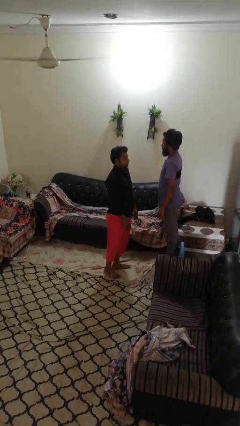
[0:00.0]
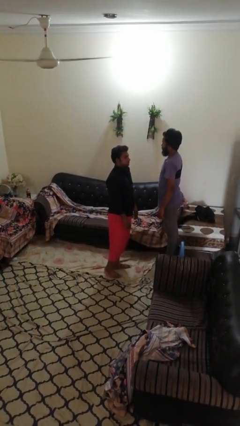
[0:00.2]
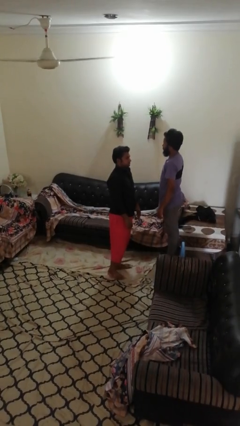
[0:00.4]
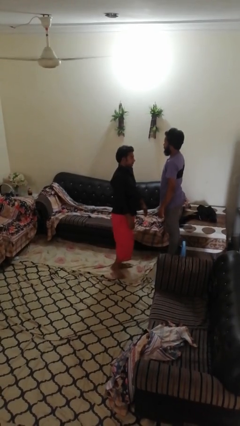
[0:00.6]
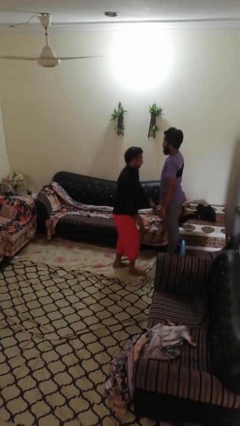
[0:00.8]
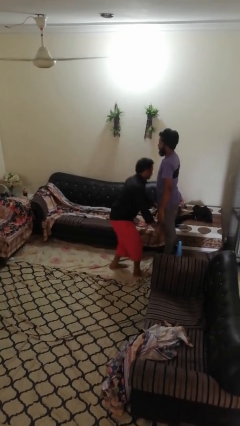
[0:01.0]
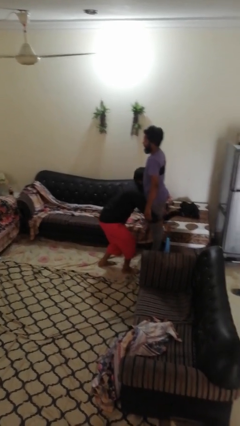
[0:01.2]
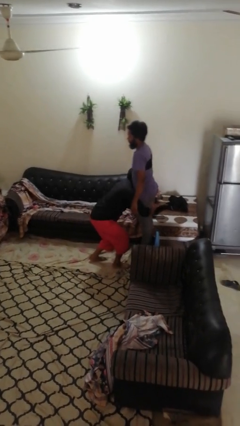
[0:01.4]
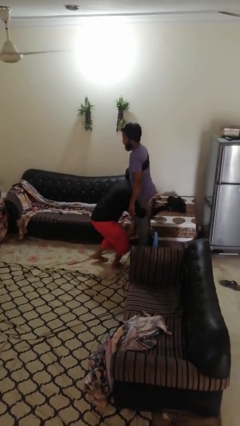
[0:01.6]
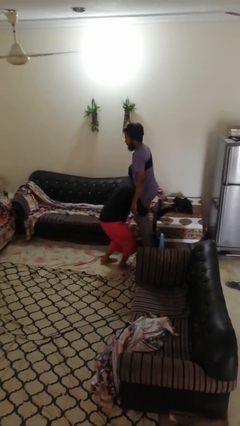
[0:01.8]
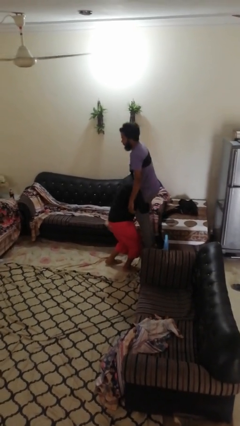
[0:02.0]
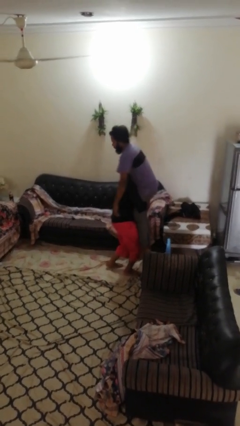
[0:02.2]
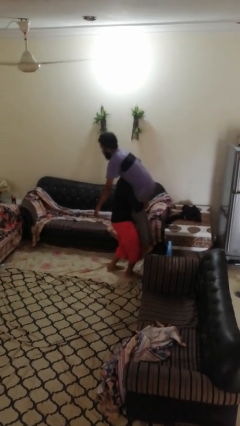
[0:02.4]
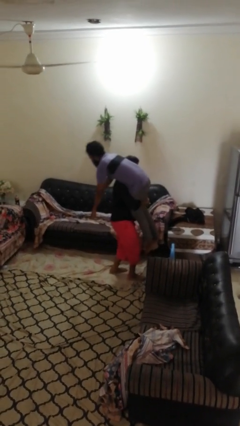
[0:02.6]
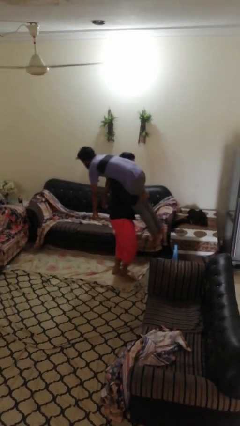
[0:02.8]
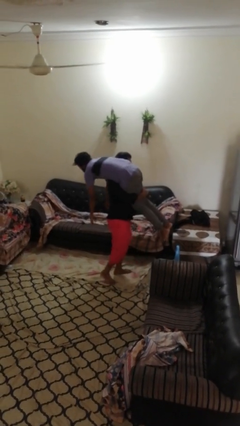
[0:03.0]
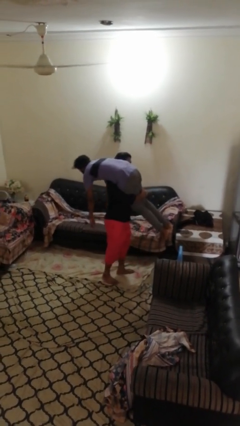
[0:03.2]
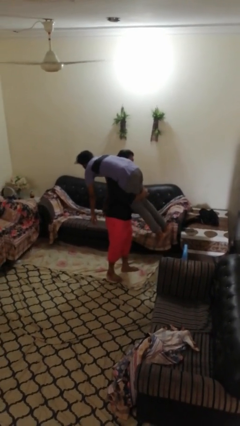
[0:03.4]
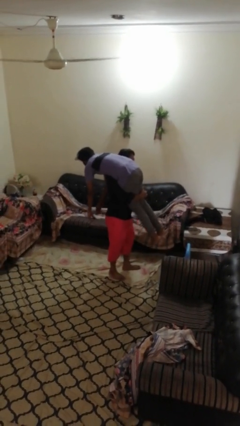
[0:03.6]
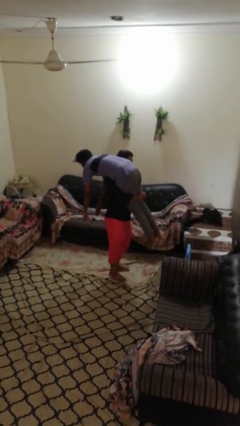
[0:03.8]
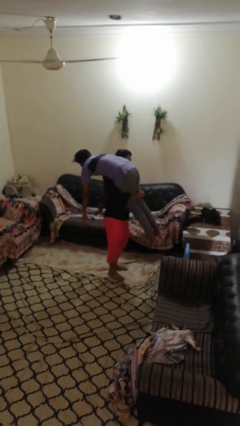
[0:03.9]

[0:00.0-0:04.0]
person carries person over shoulder

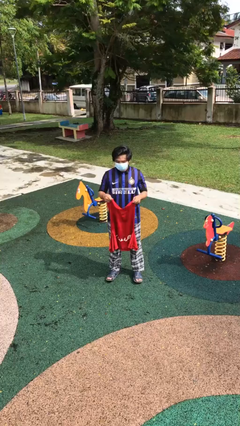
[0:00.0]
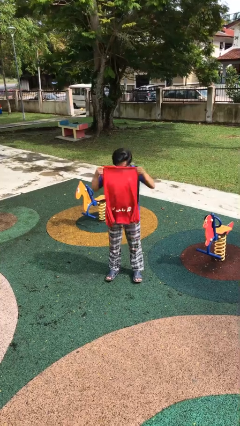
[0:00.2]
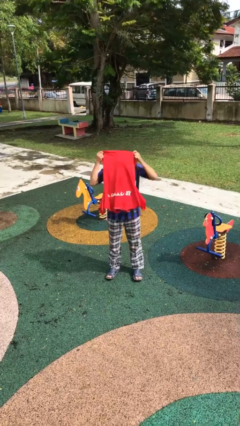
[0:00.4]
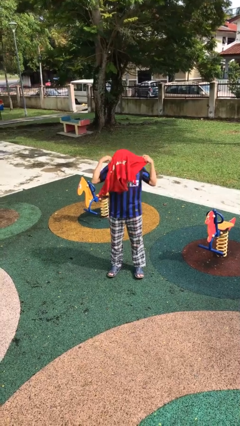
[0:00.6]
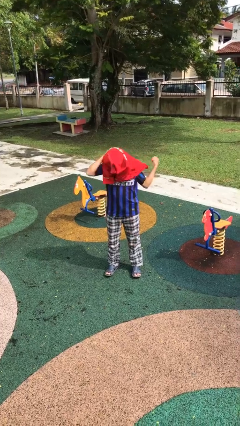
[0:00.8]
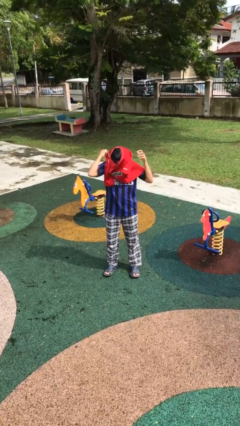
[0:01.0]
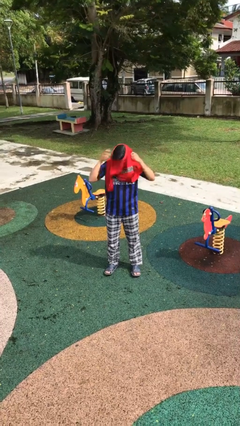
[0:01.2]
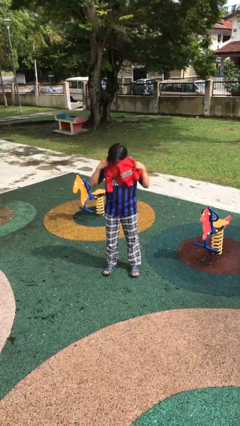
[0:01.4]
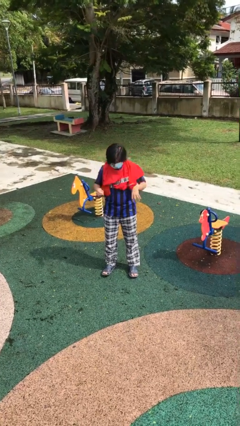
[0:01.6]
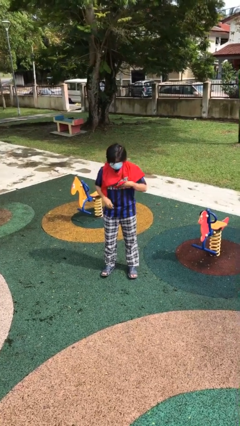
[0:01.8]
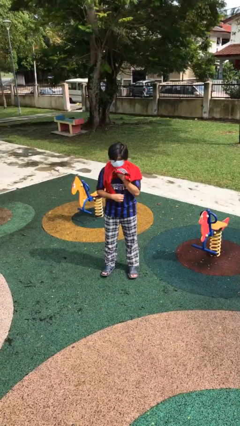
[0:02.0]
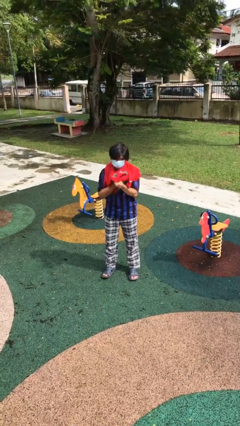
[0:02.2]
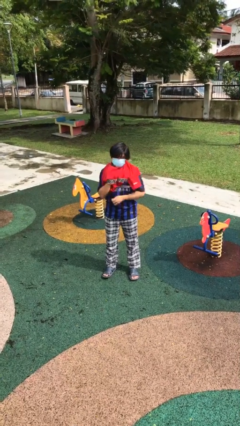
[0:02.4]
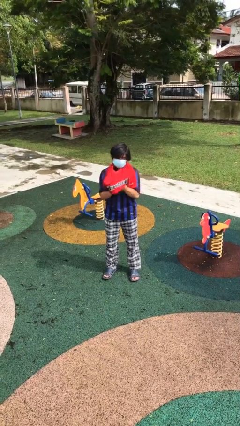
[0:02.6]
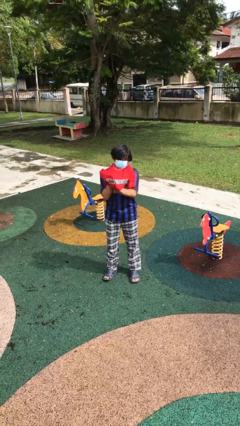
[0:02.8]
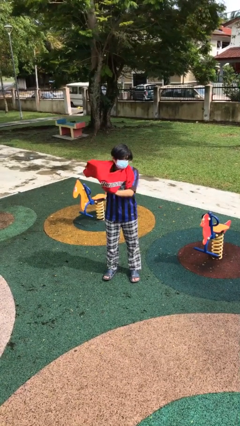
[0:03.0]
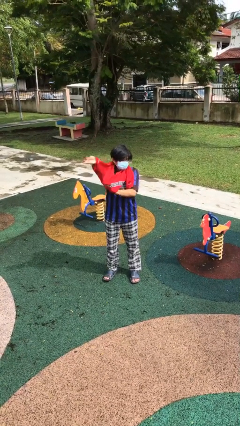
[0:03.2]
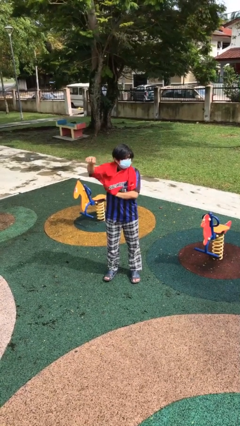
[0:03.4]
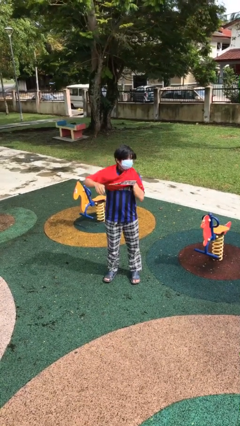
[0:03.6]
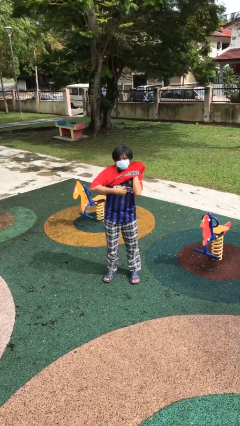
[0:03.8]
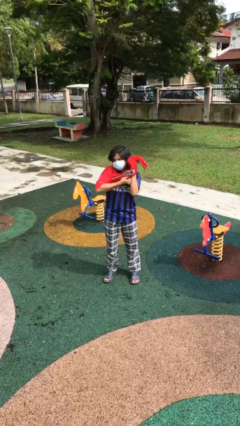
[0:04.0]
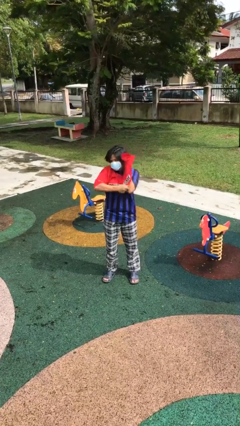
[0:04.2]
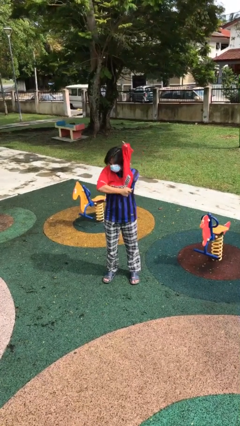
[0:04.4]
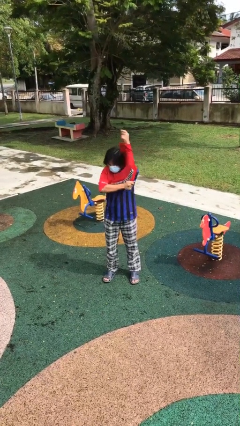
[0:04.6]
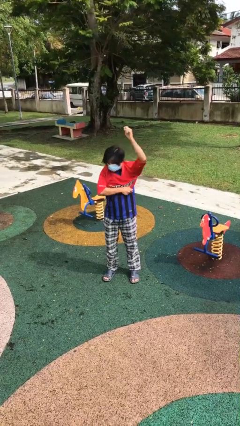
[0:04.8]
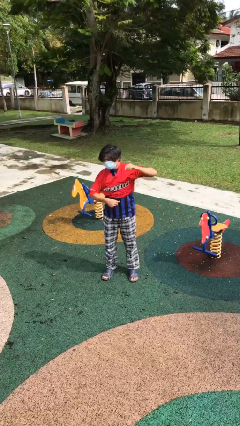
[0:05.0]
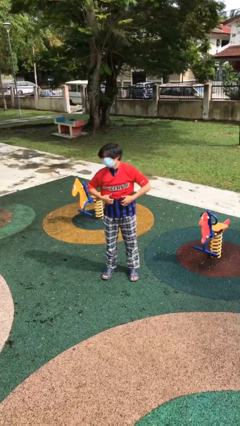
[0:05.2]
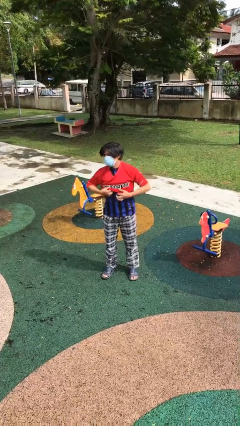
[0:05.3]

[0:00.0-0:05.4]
person puts on shirt

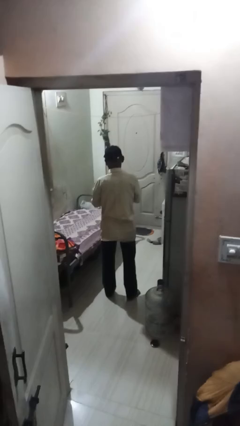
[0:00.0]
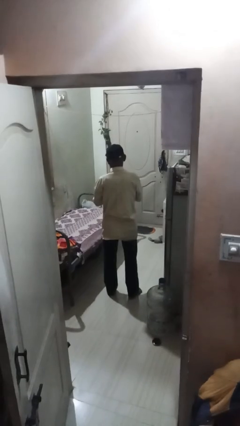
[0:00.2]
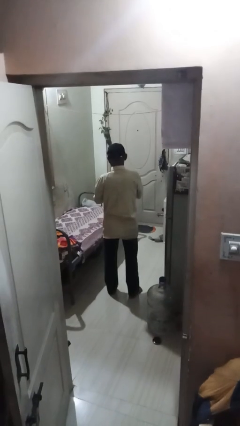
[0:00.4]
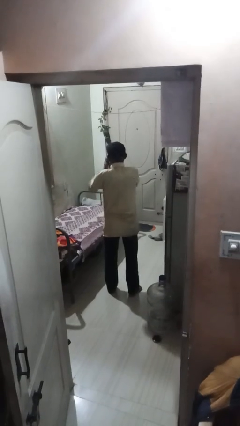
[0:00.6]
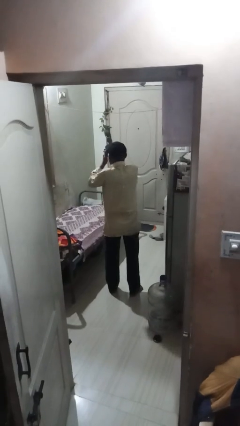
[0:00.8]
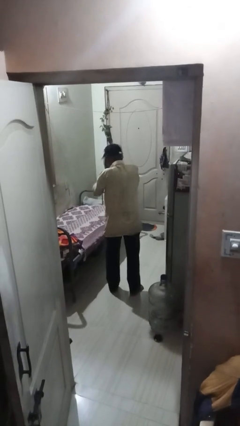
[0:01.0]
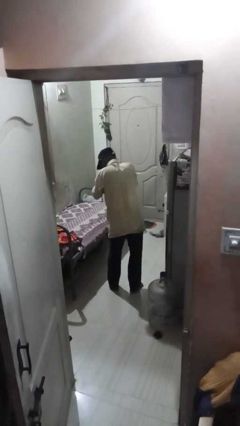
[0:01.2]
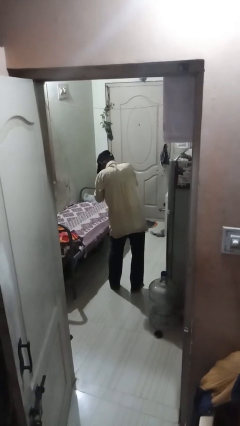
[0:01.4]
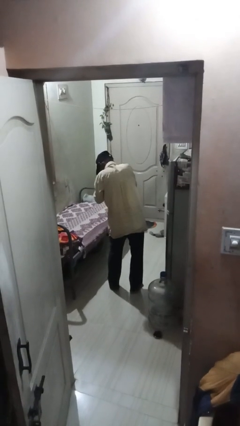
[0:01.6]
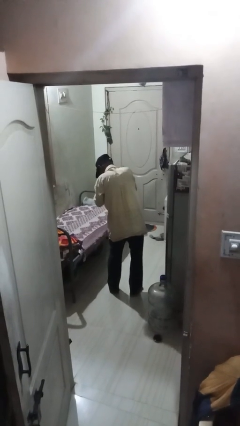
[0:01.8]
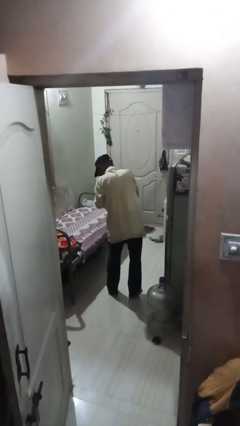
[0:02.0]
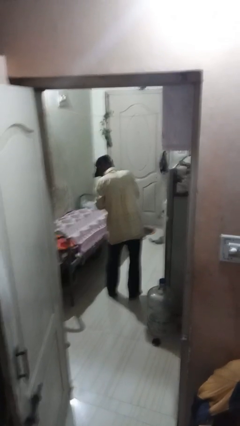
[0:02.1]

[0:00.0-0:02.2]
person sneezes into hand

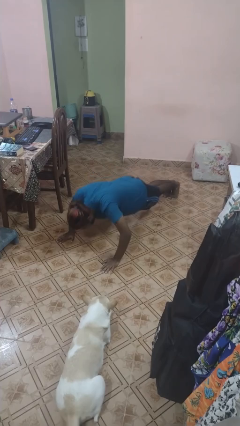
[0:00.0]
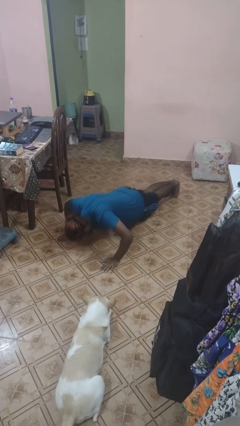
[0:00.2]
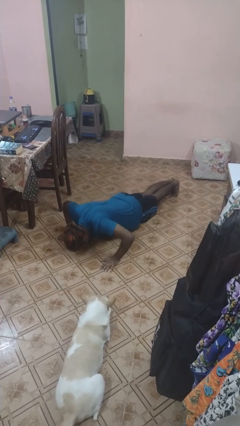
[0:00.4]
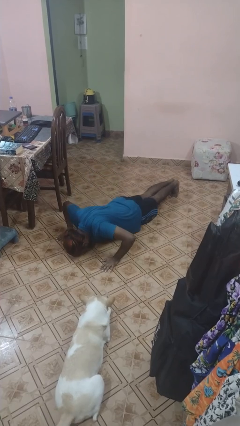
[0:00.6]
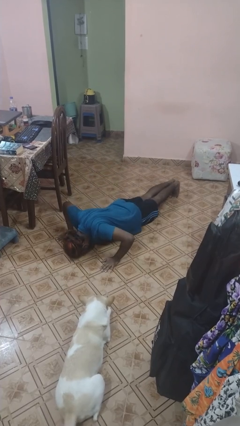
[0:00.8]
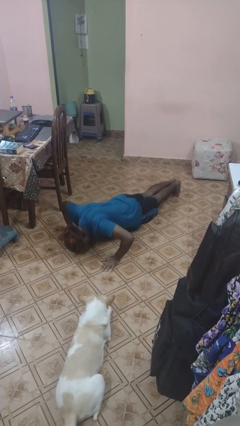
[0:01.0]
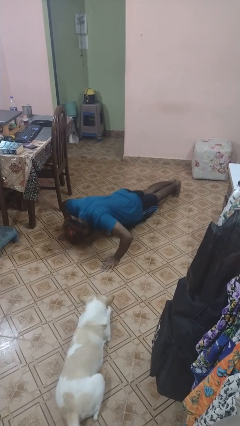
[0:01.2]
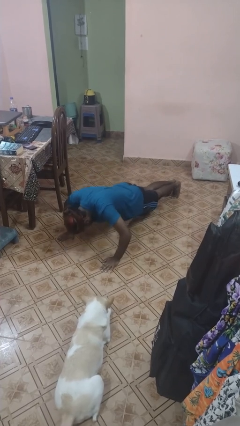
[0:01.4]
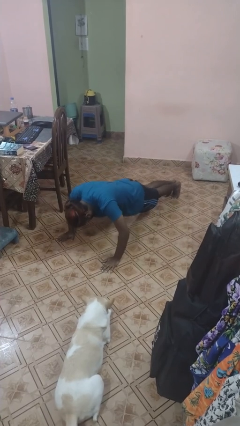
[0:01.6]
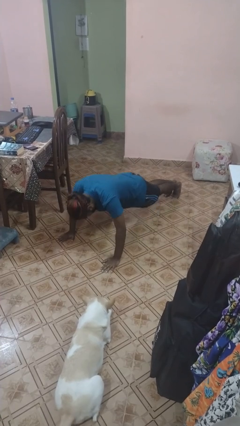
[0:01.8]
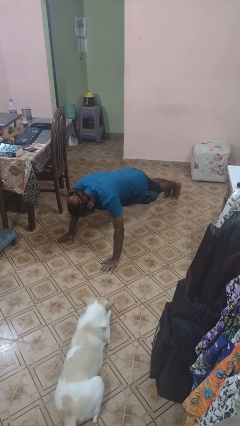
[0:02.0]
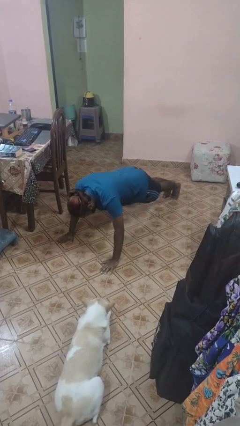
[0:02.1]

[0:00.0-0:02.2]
person exercises with pushup

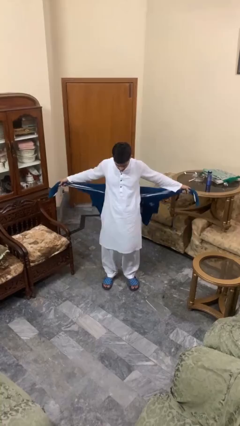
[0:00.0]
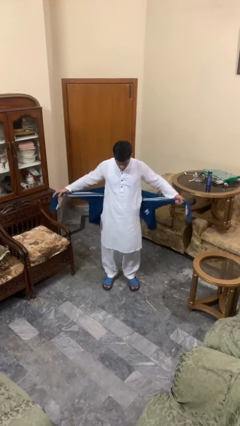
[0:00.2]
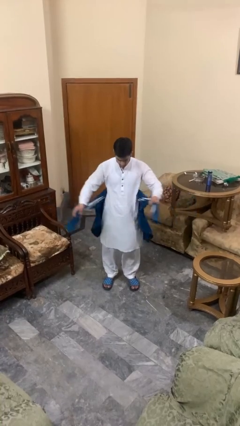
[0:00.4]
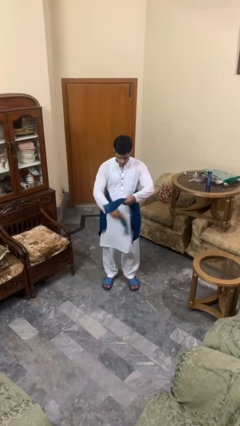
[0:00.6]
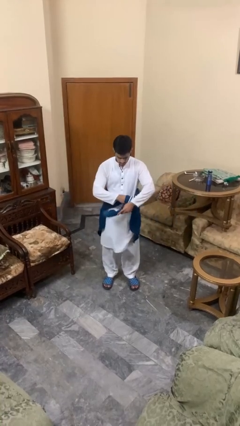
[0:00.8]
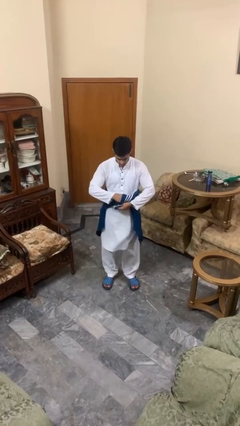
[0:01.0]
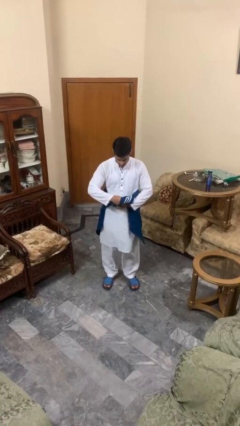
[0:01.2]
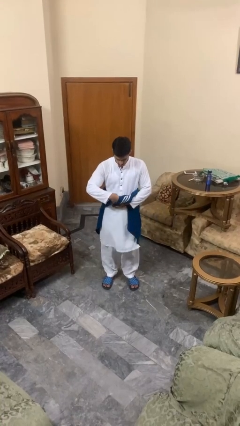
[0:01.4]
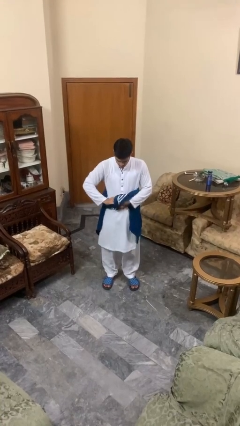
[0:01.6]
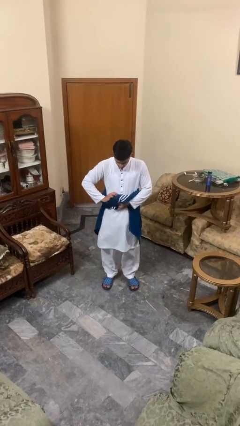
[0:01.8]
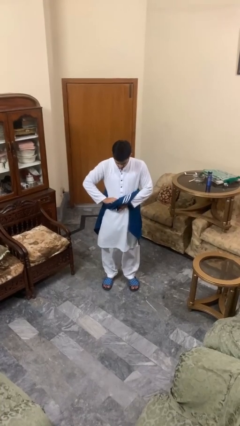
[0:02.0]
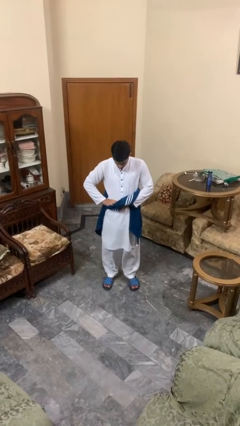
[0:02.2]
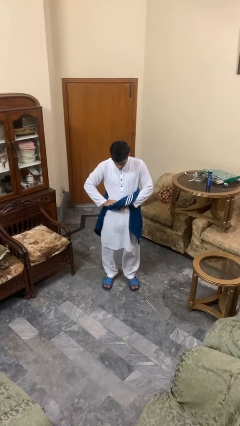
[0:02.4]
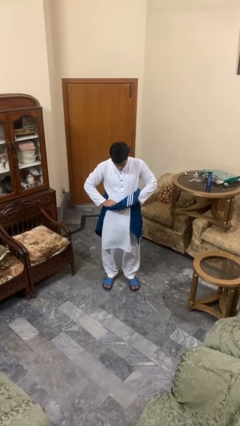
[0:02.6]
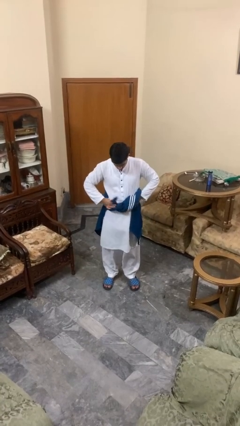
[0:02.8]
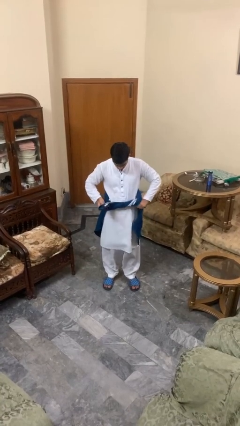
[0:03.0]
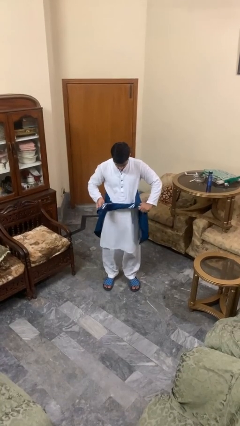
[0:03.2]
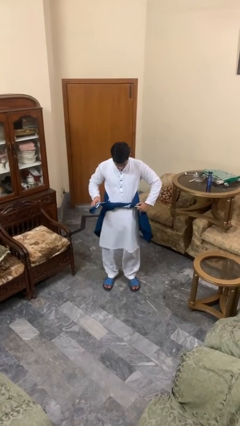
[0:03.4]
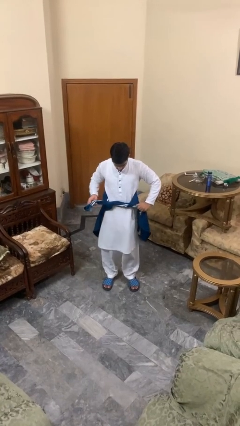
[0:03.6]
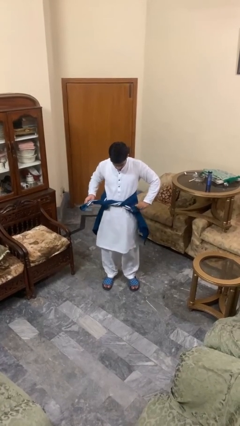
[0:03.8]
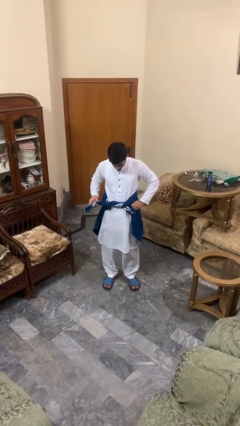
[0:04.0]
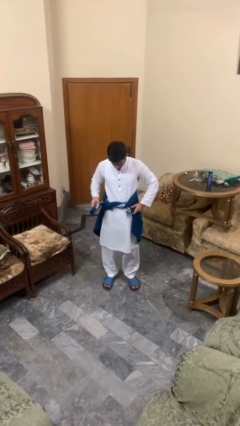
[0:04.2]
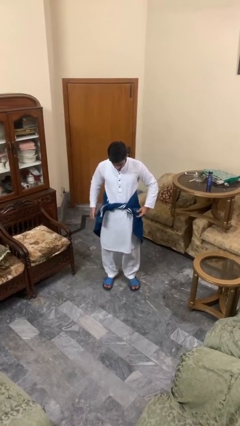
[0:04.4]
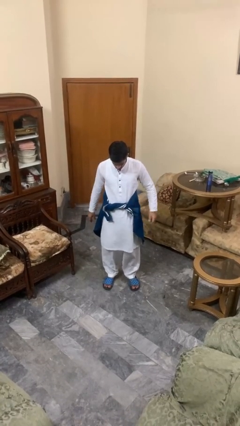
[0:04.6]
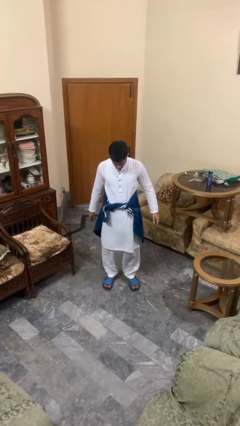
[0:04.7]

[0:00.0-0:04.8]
person ties jacket around waist
